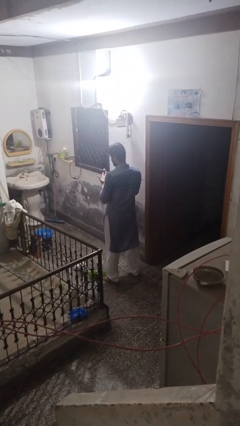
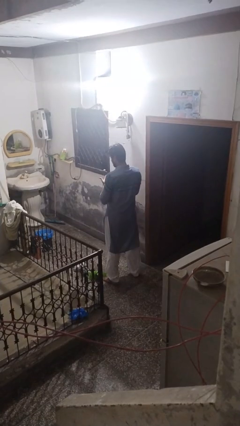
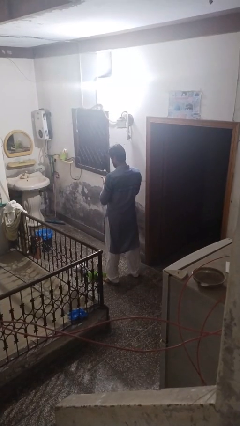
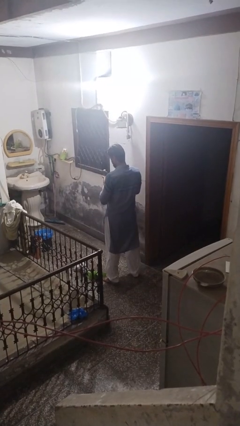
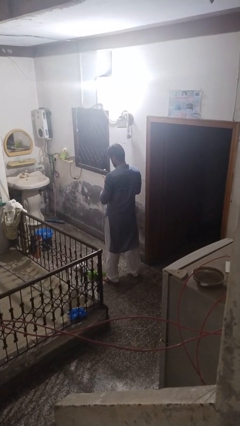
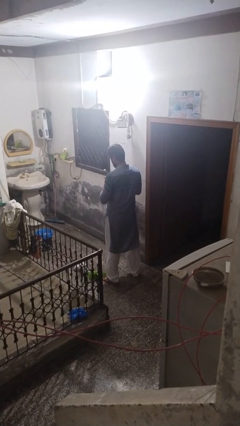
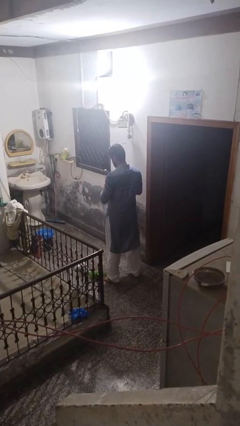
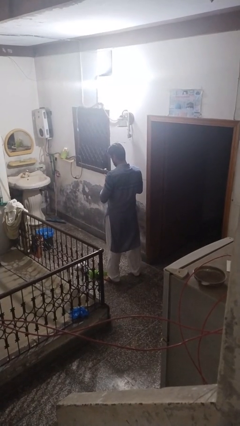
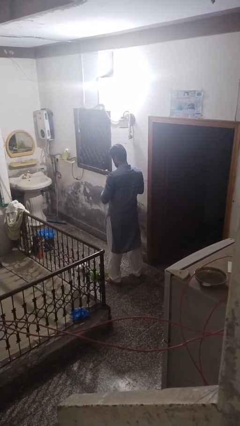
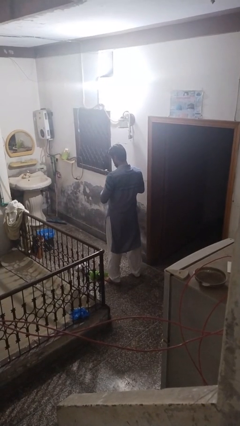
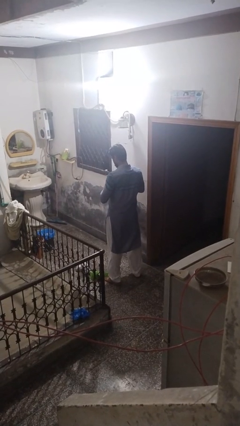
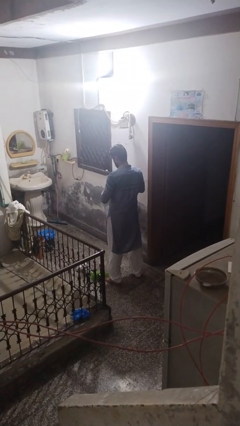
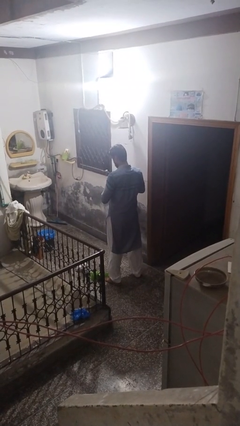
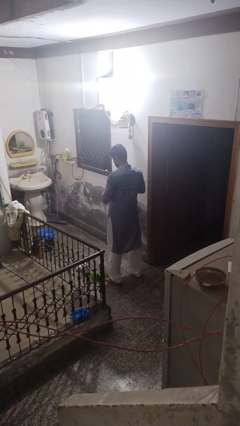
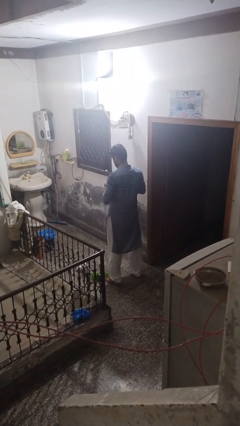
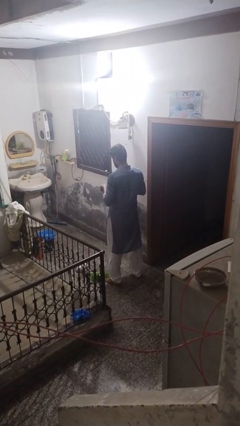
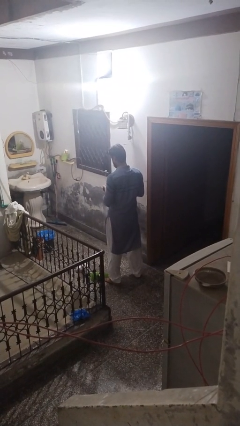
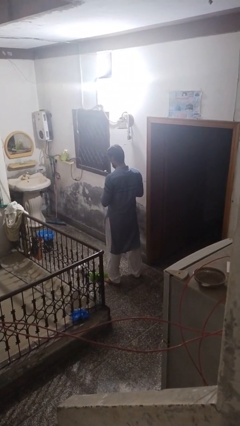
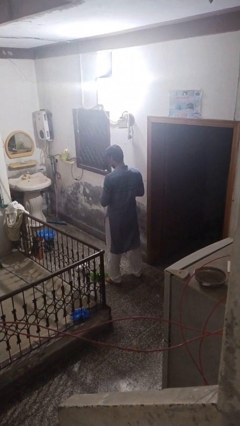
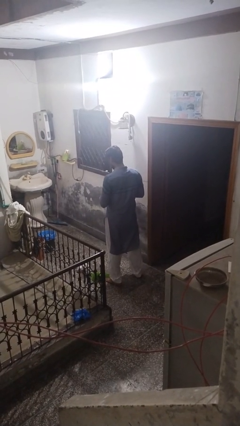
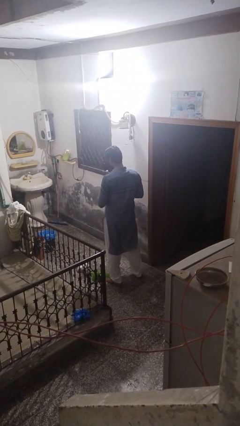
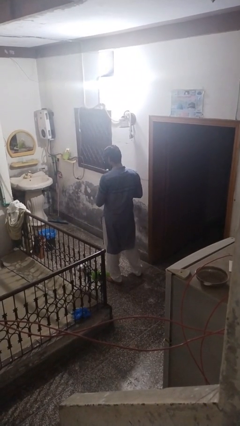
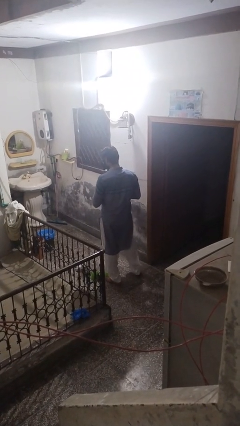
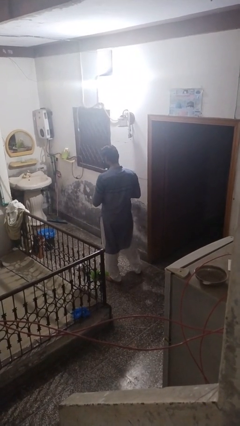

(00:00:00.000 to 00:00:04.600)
person takes off ring

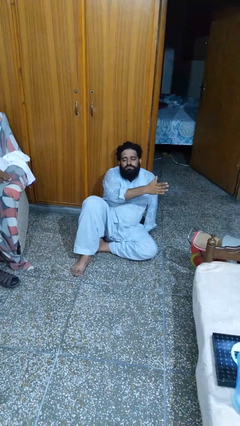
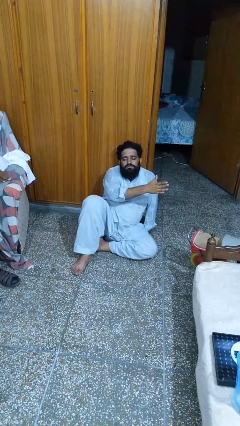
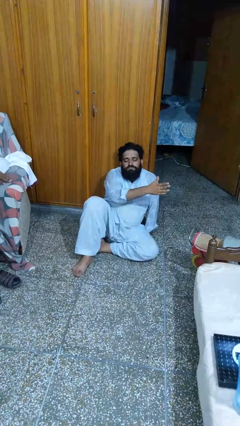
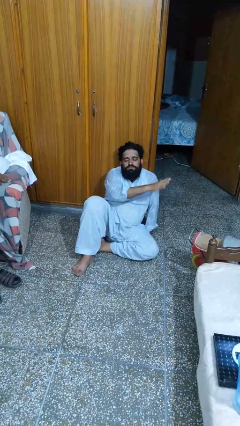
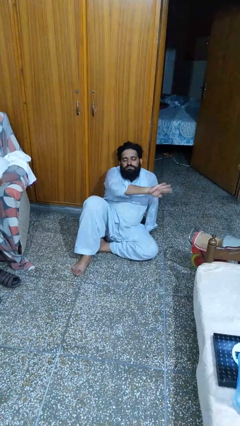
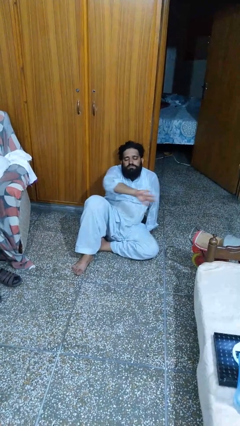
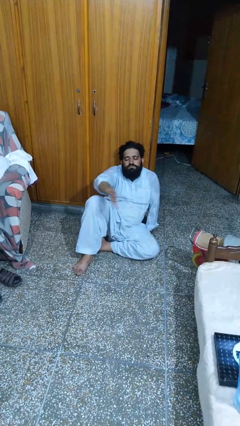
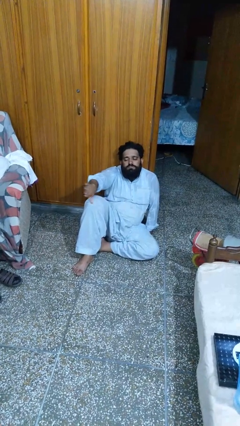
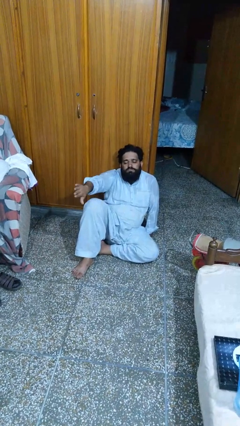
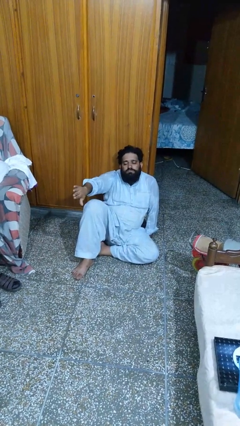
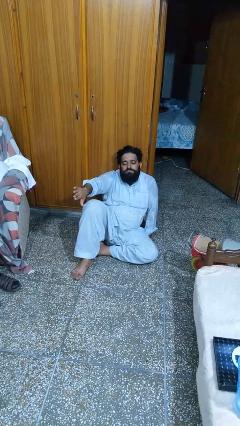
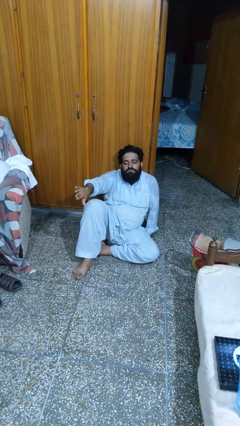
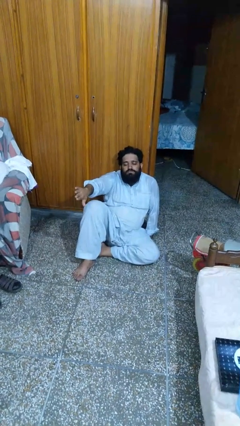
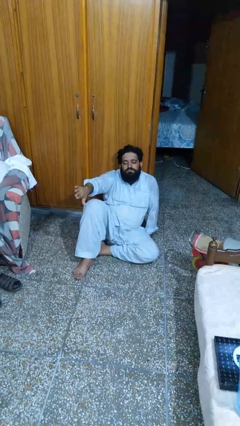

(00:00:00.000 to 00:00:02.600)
person gestures swipe right

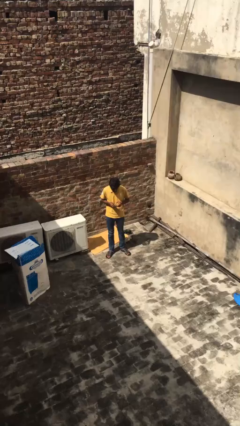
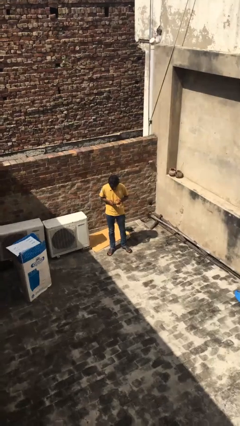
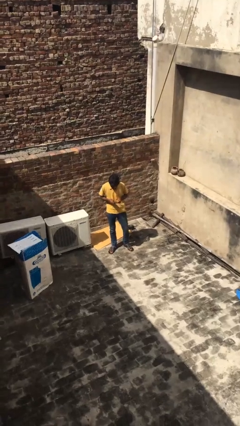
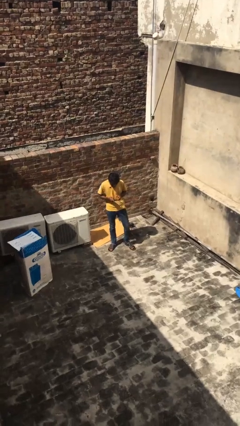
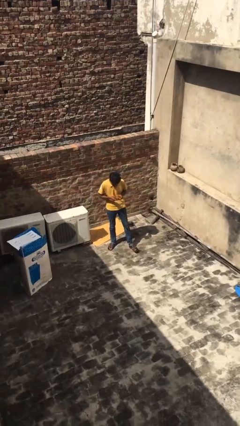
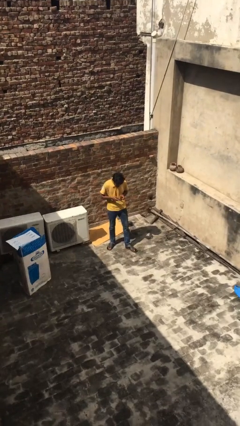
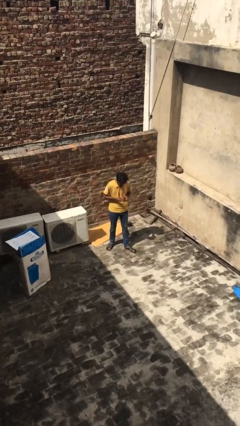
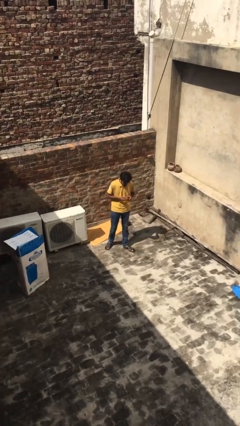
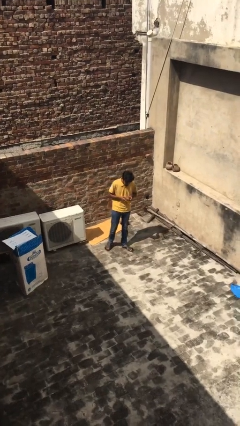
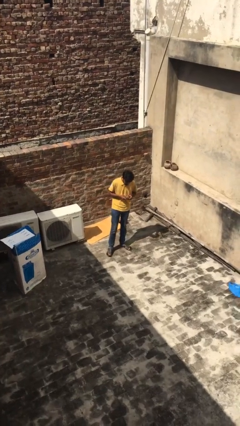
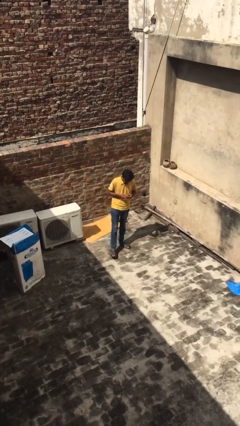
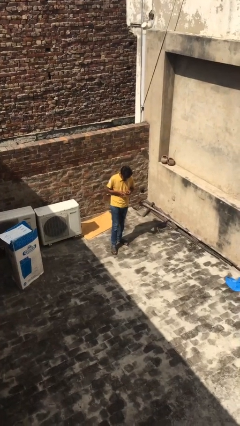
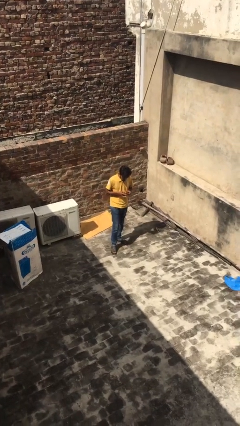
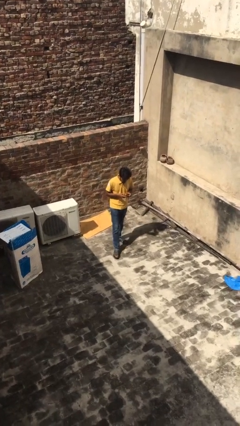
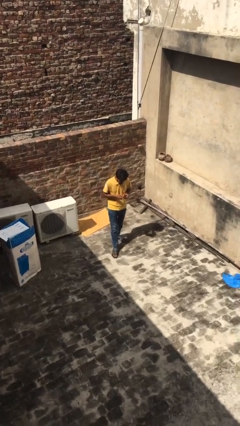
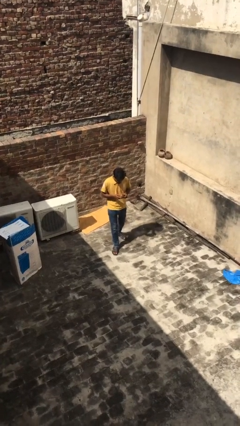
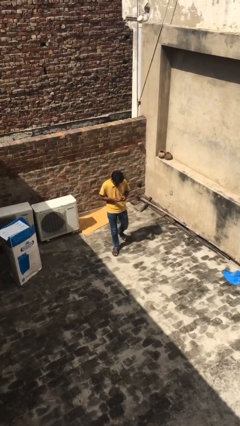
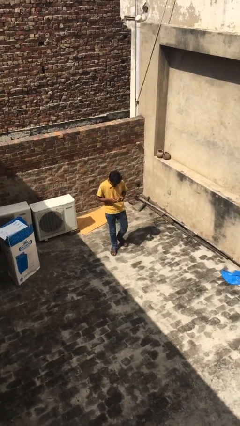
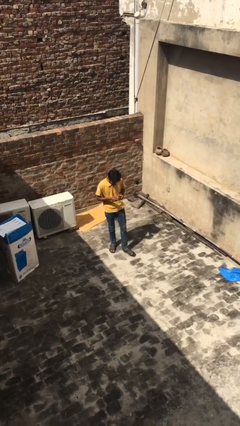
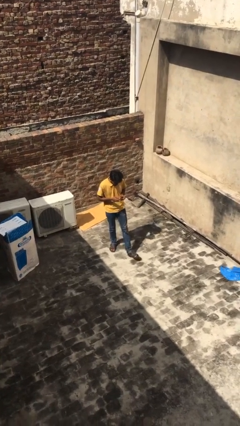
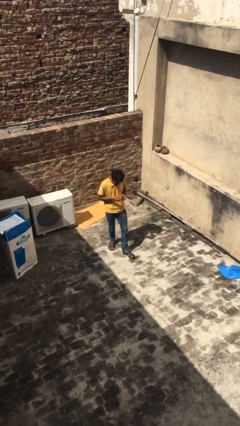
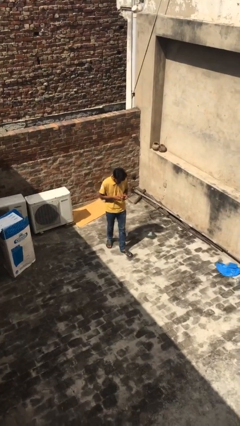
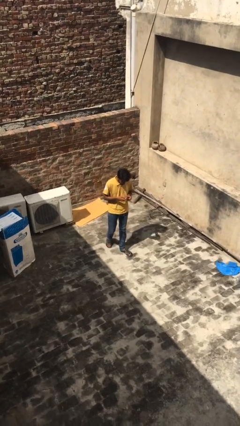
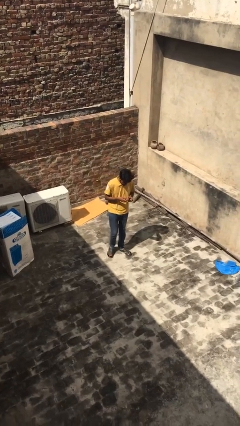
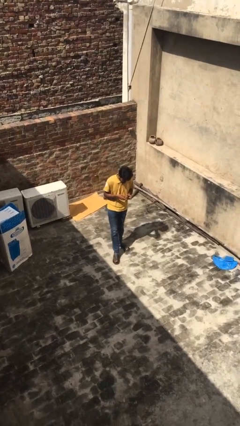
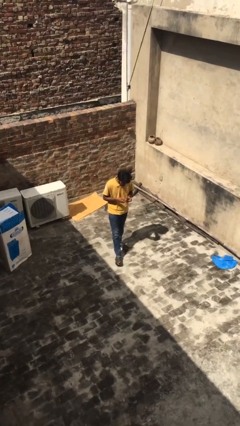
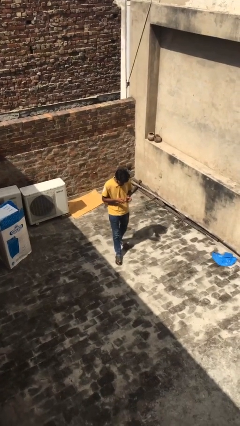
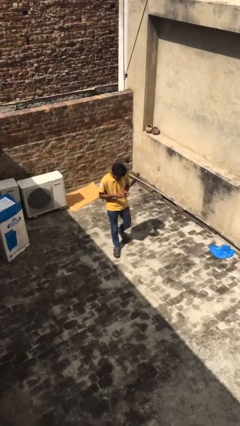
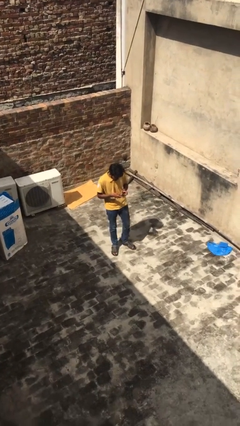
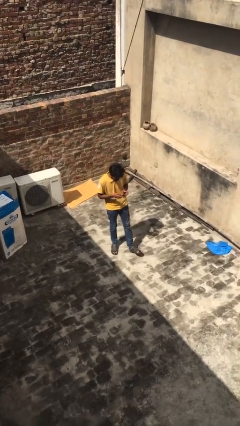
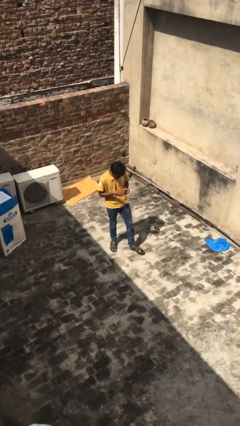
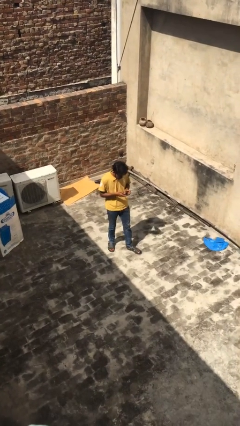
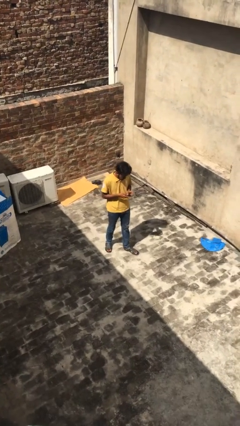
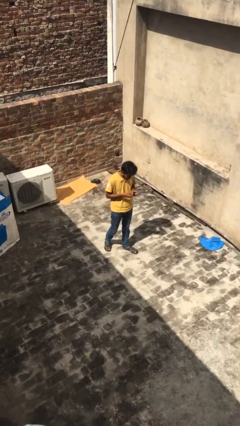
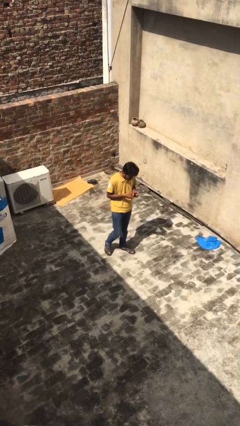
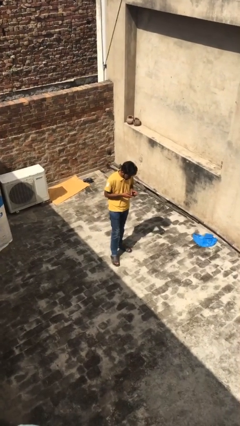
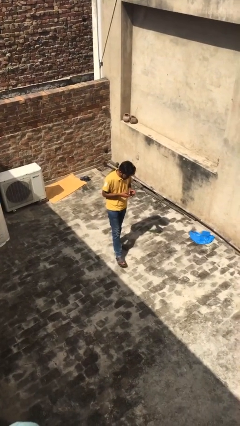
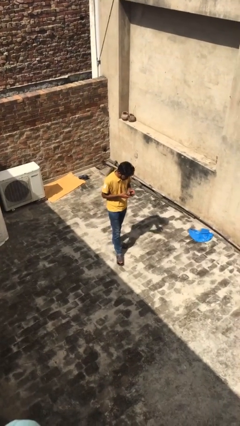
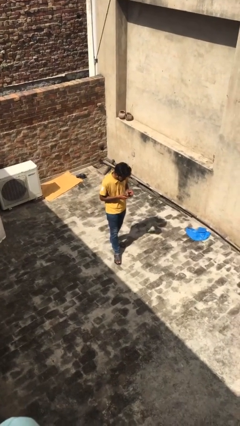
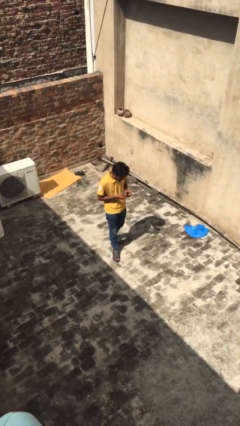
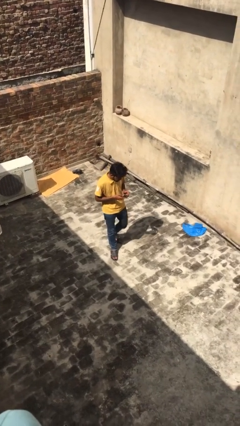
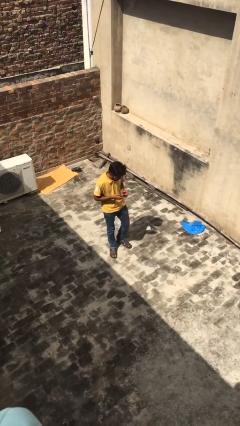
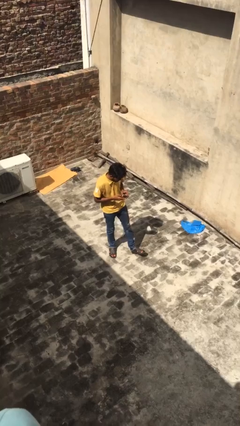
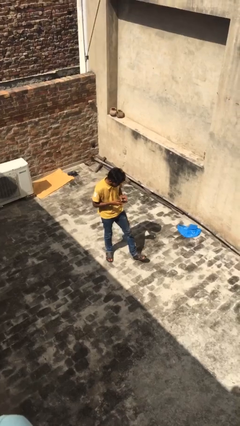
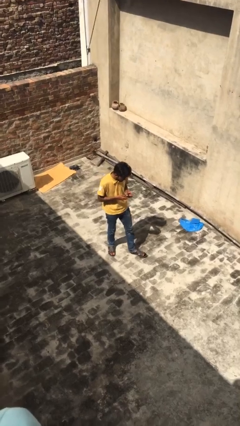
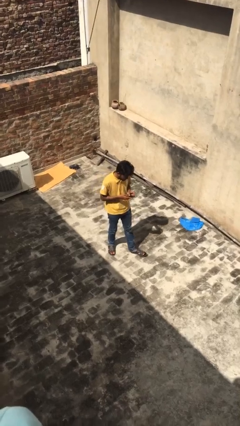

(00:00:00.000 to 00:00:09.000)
person texts on phone

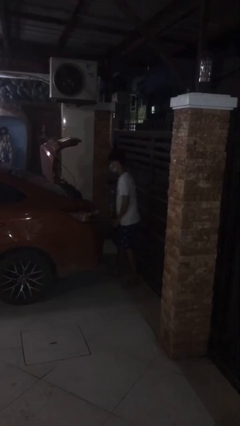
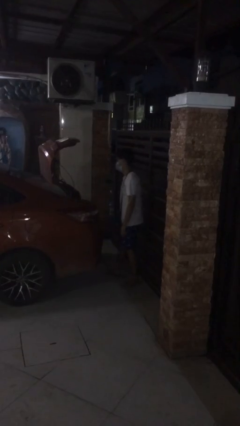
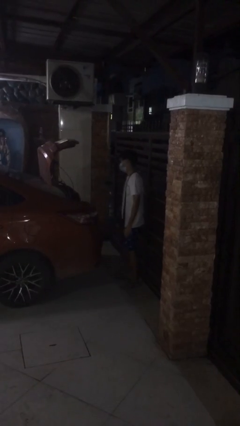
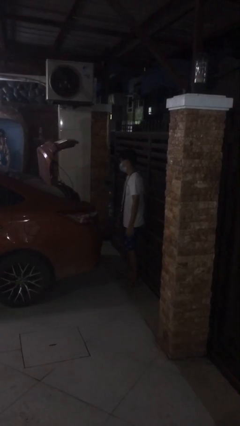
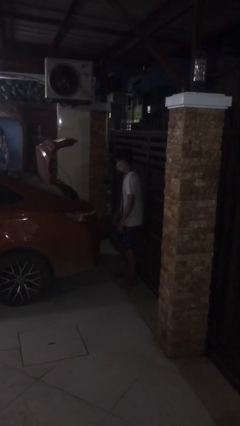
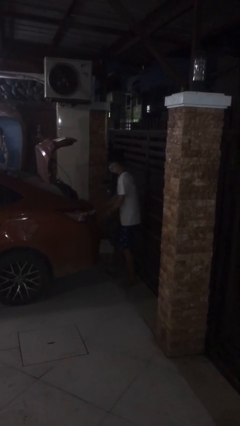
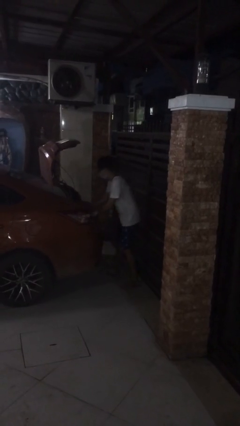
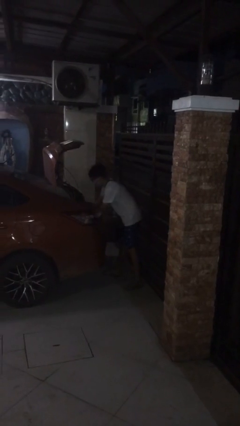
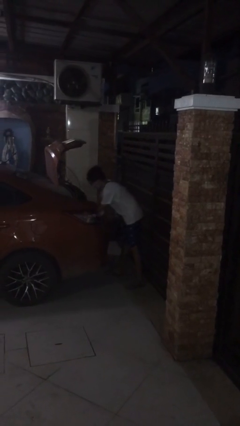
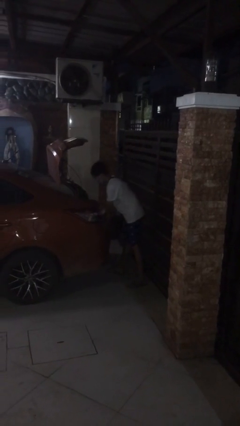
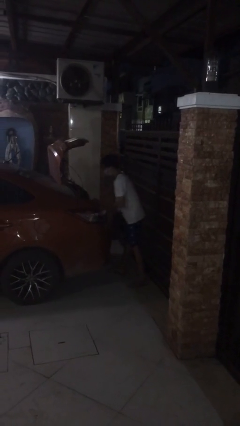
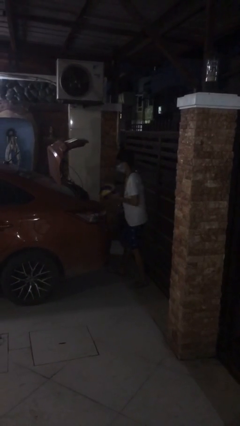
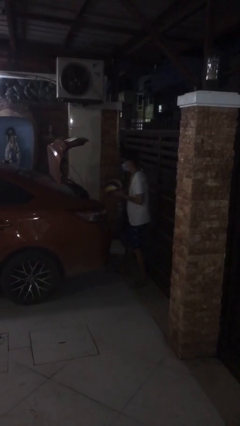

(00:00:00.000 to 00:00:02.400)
person unloads car
